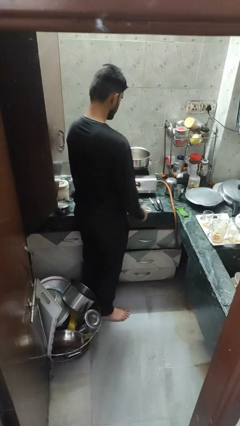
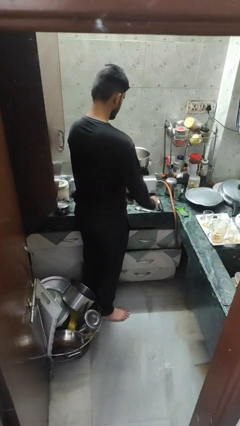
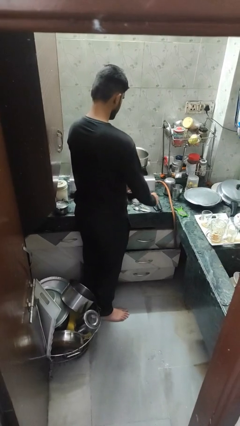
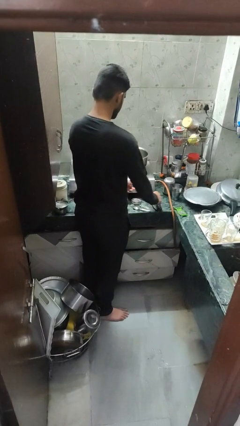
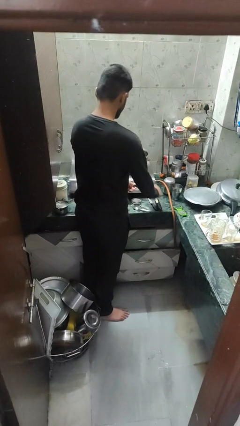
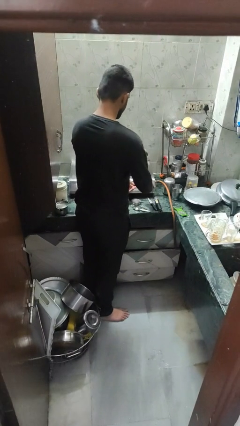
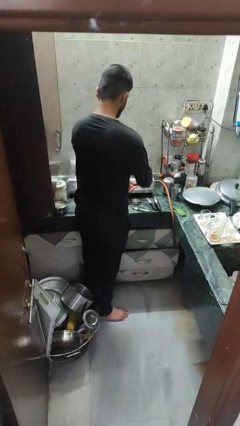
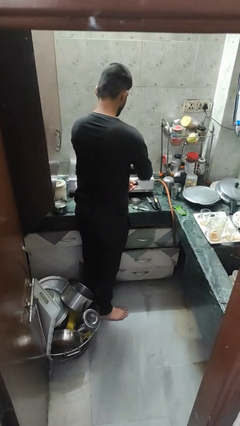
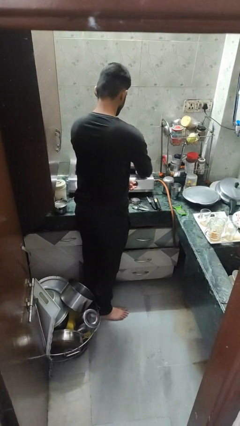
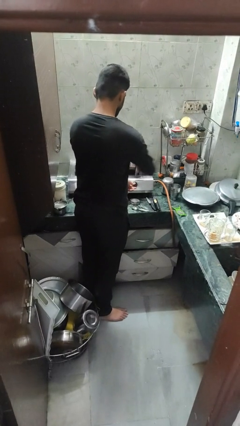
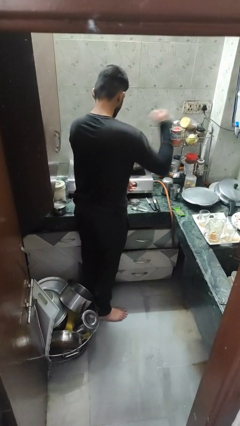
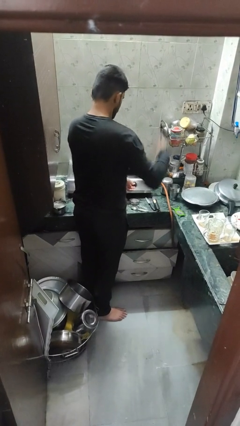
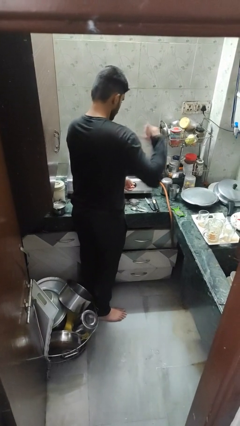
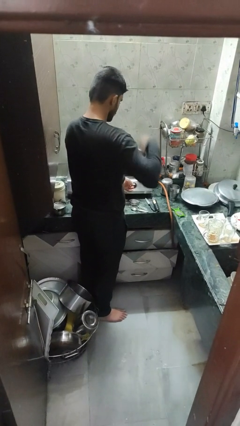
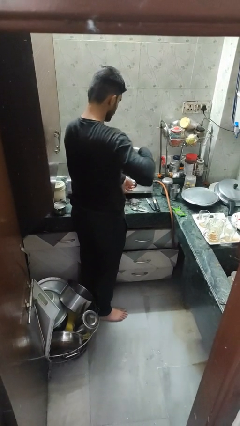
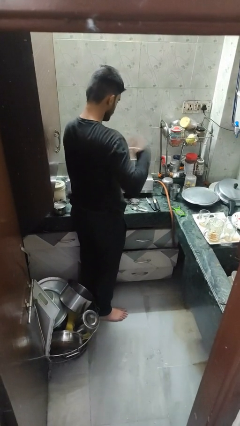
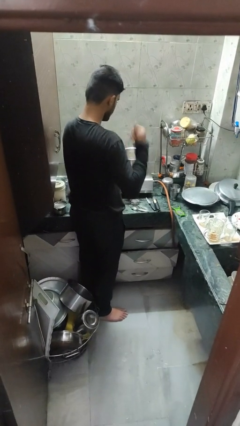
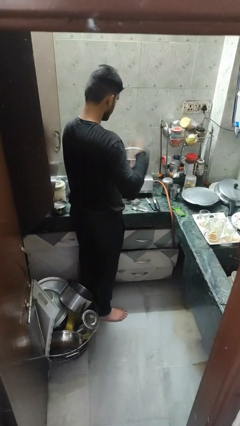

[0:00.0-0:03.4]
person burns hand

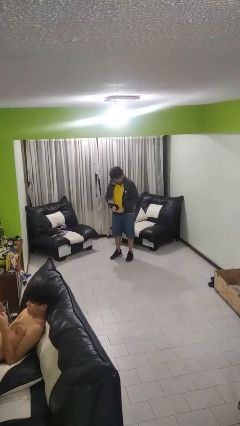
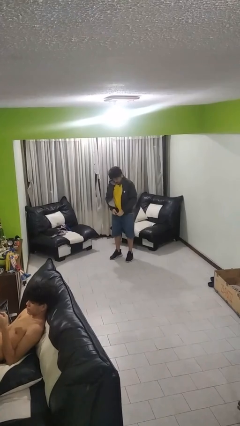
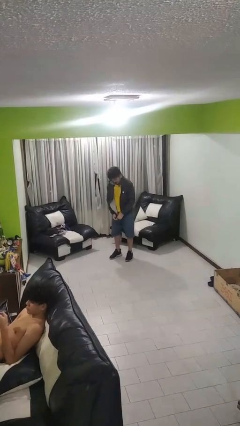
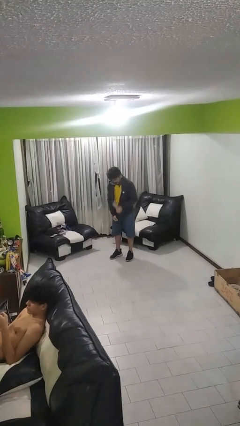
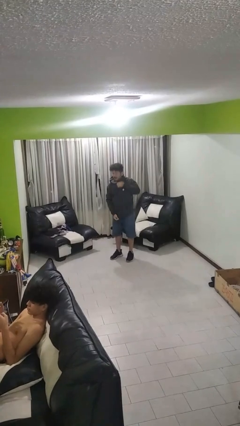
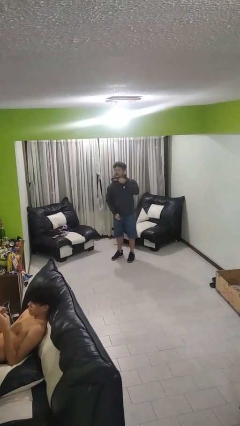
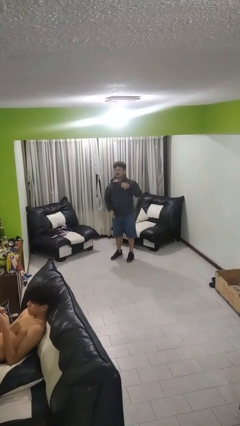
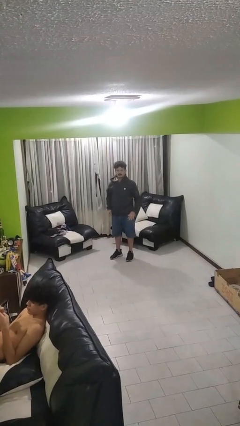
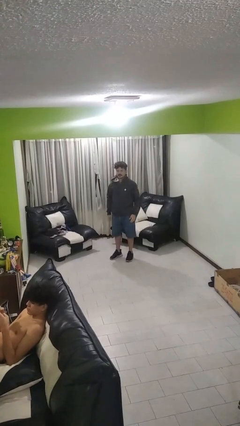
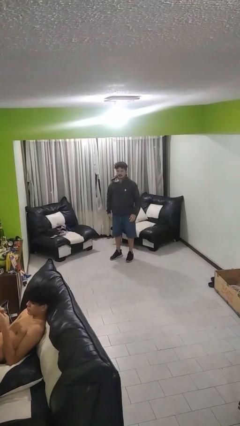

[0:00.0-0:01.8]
person zips up jacket

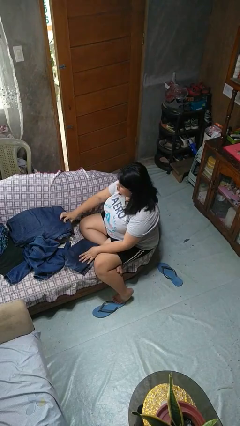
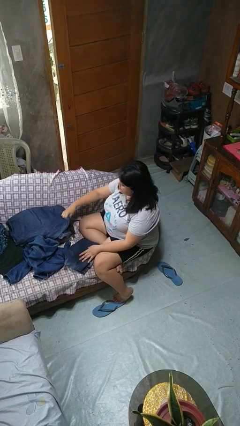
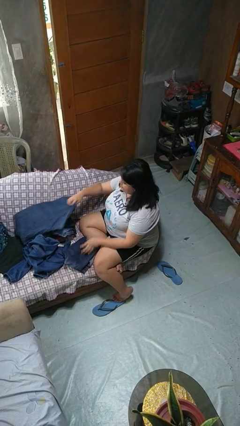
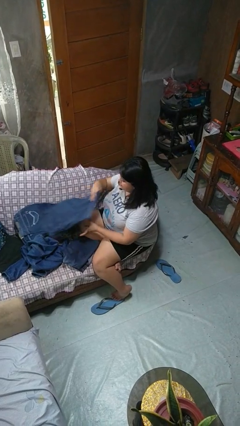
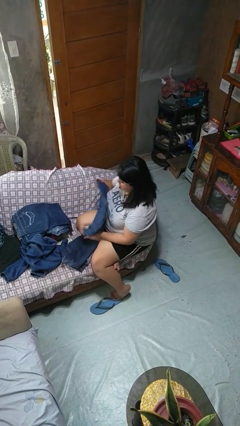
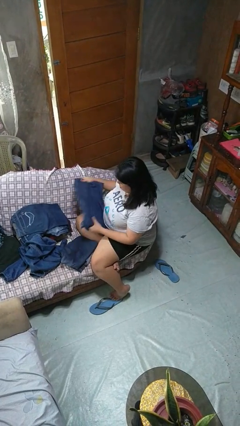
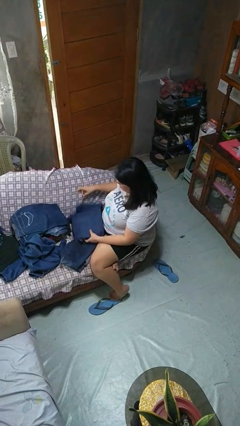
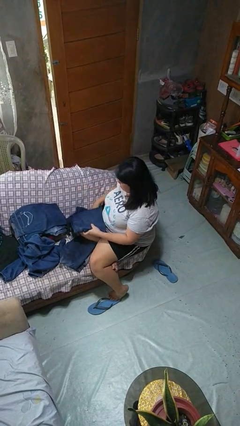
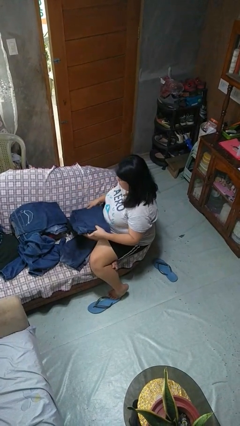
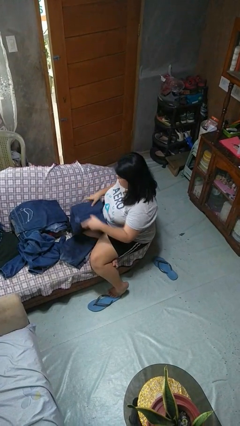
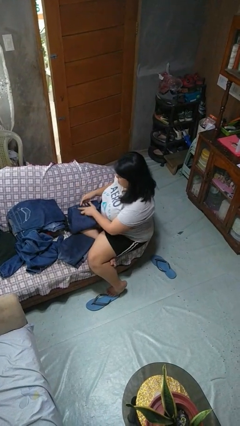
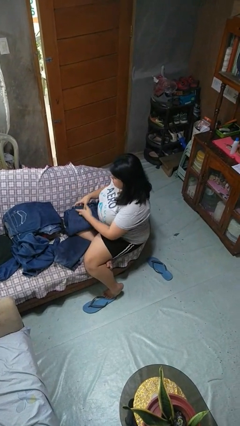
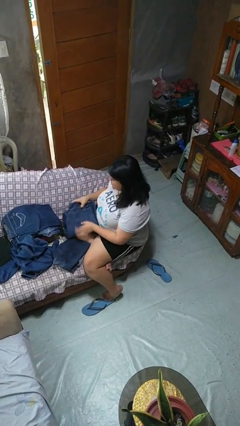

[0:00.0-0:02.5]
person folds pants

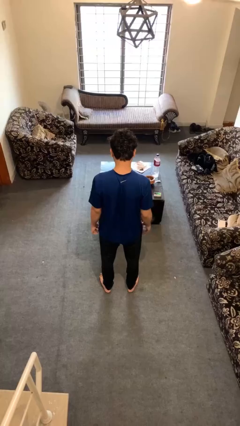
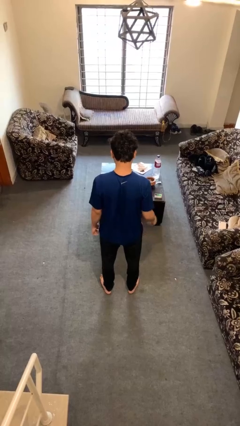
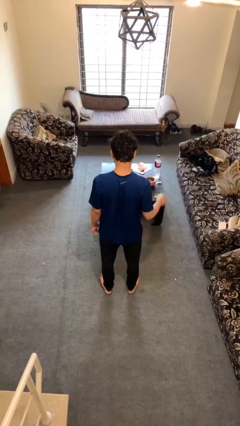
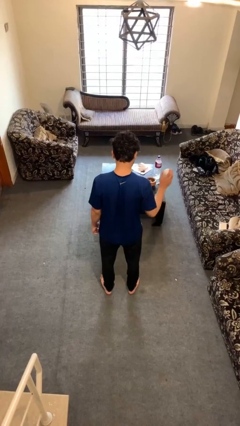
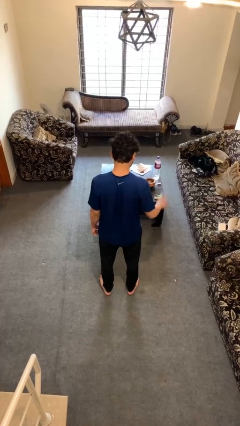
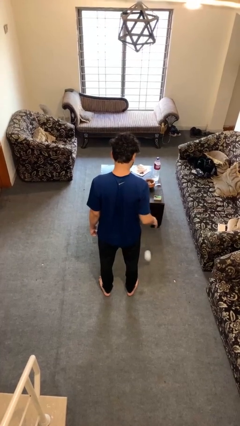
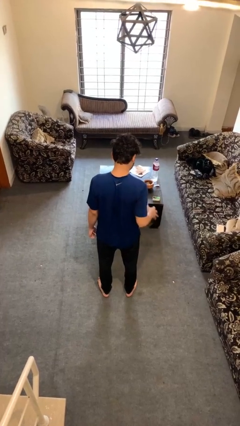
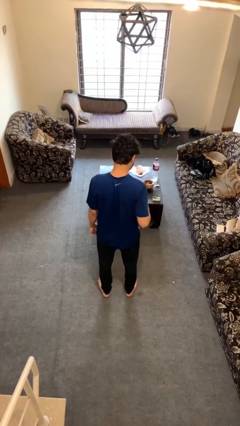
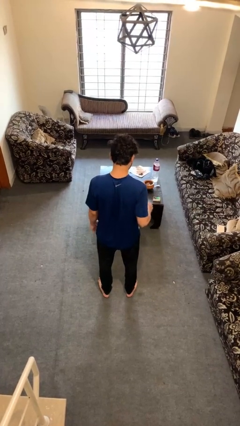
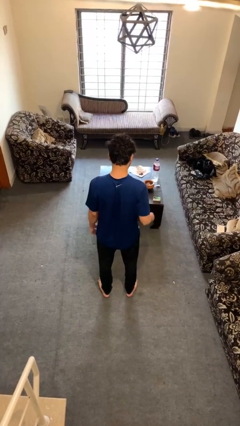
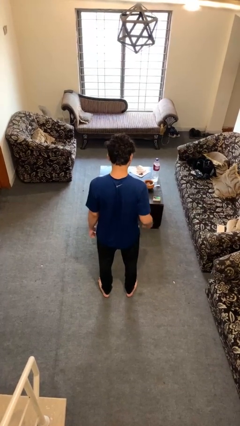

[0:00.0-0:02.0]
person bounces ball on floor

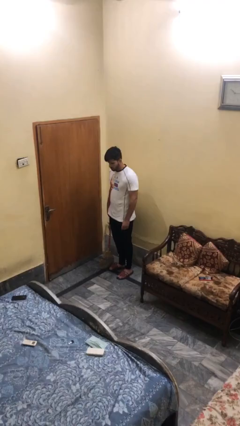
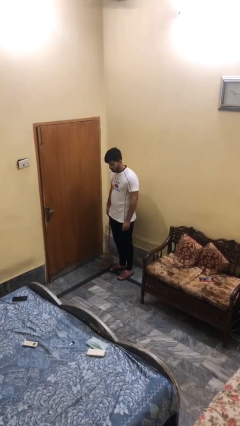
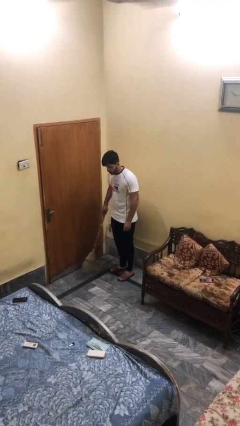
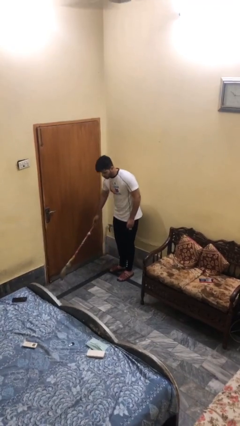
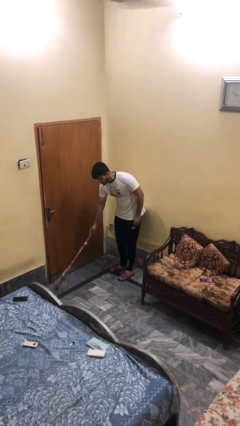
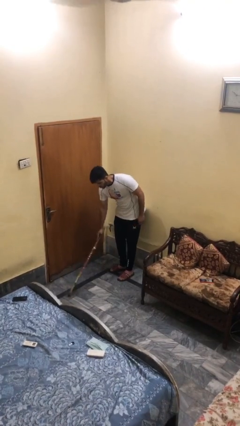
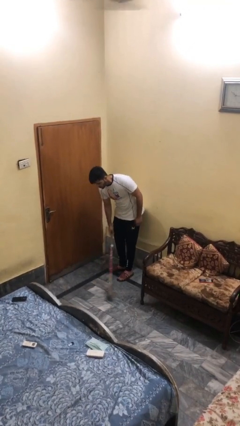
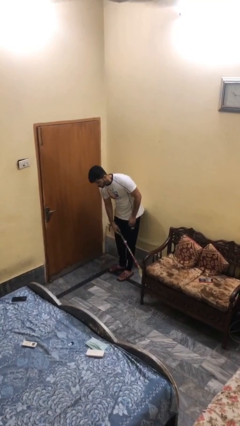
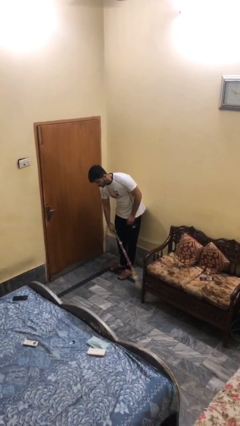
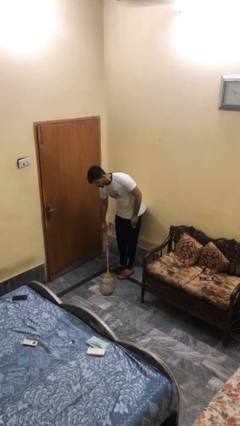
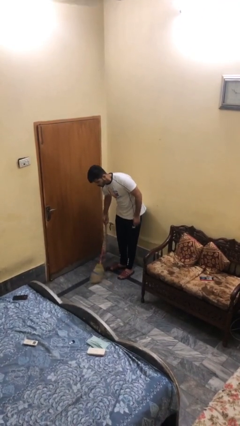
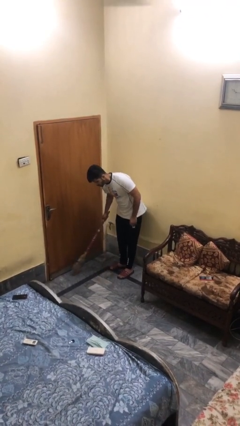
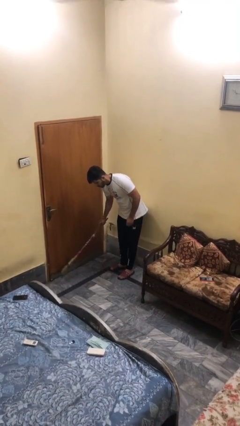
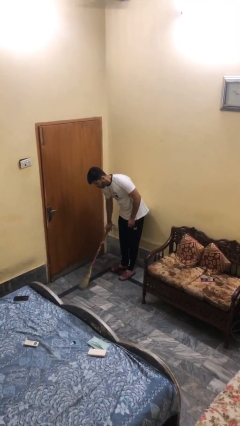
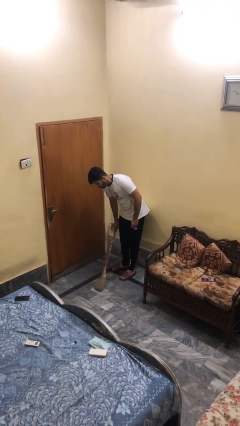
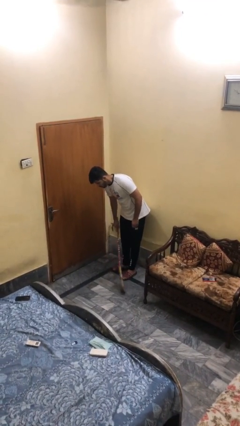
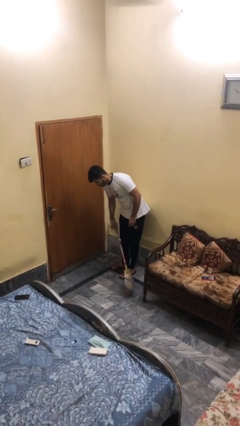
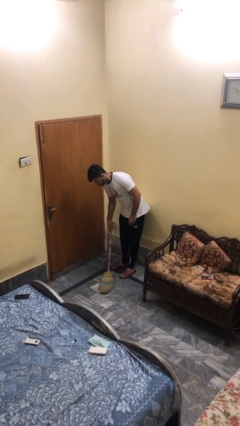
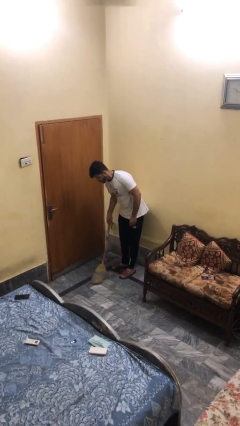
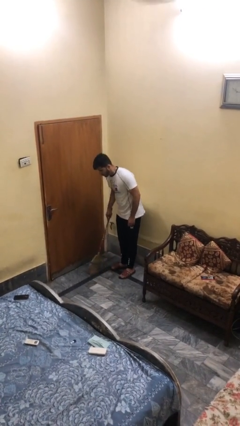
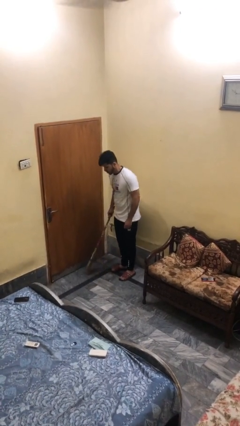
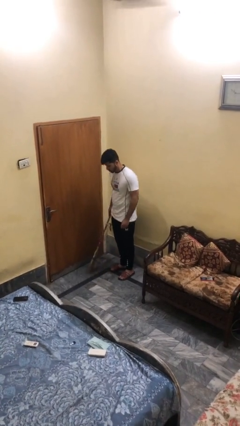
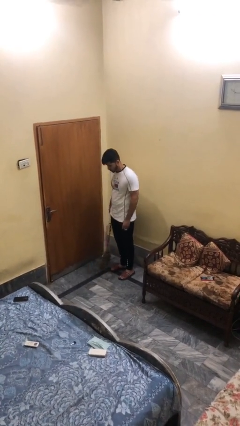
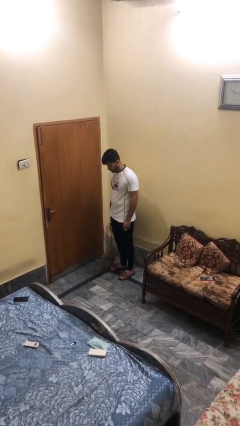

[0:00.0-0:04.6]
person sweeps floor

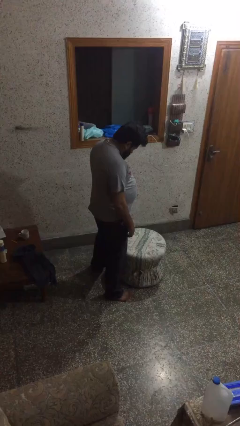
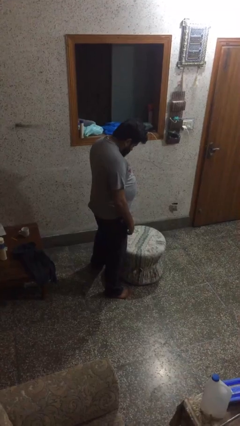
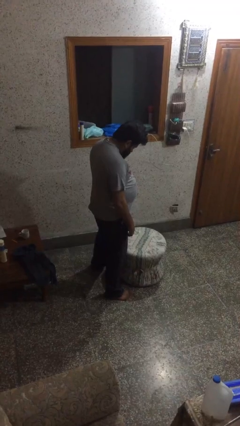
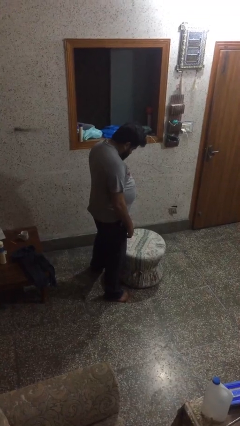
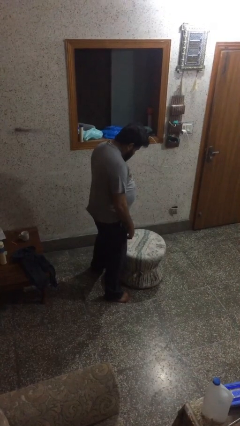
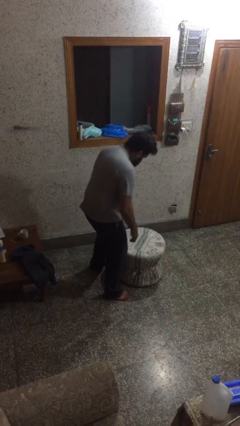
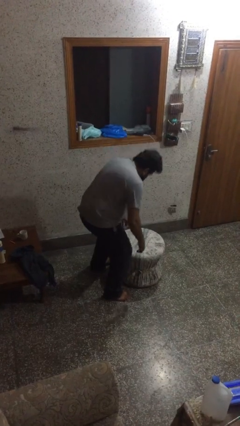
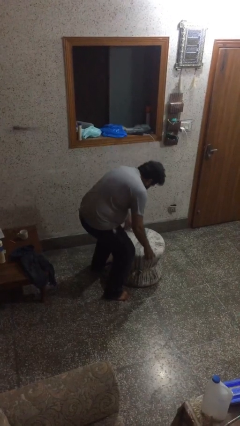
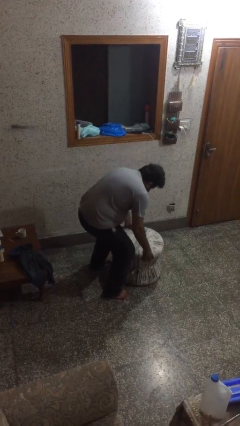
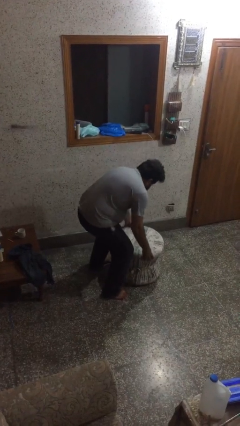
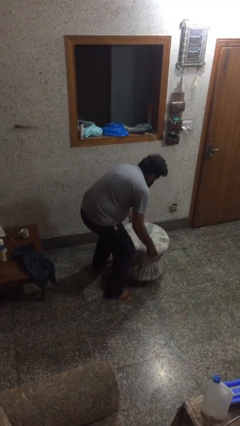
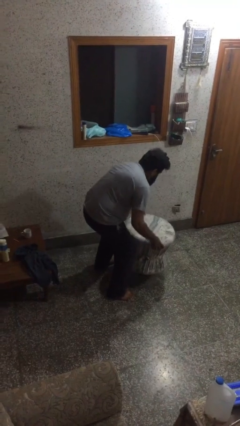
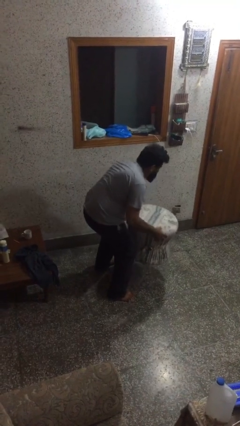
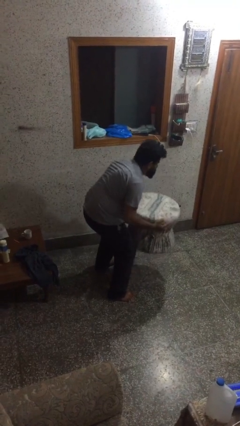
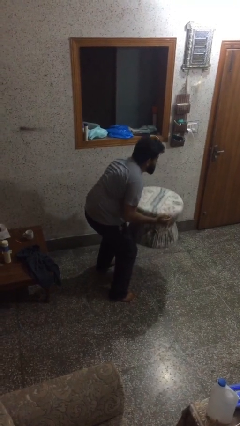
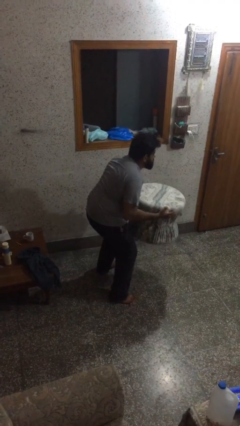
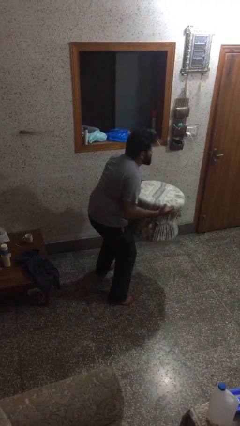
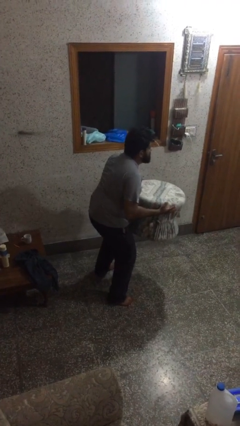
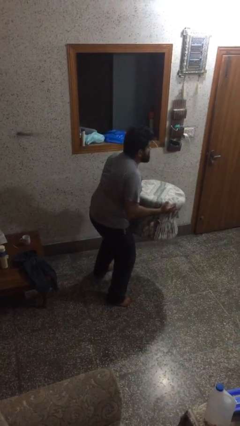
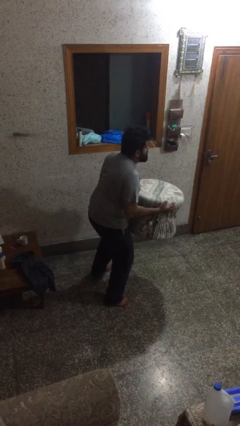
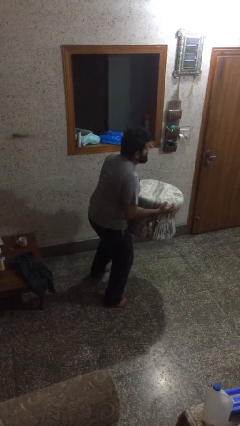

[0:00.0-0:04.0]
person picks up object from floor
